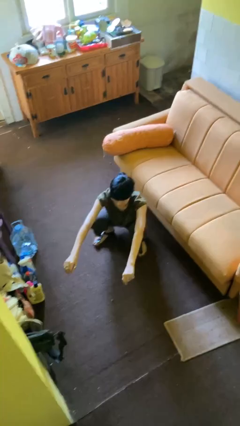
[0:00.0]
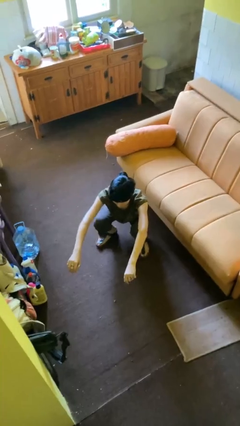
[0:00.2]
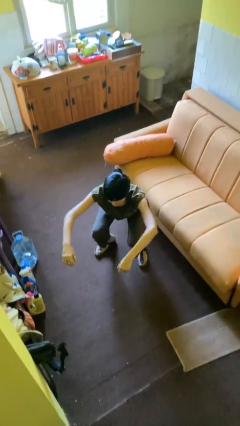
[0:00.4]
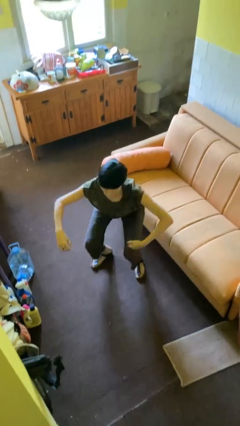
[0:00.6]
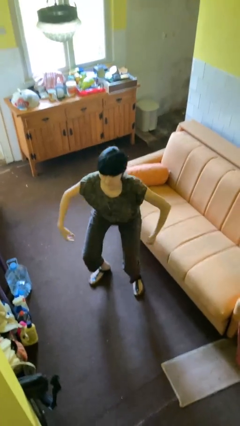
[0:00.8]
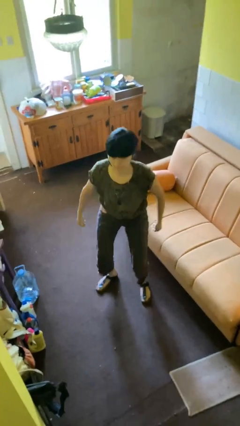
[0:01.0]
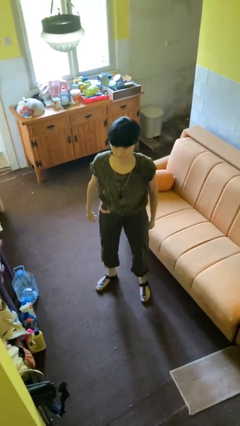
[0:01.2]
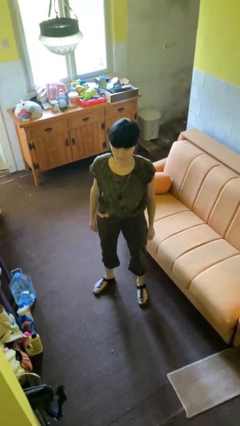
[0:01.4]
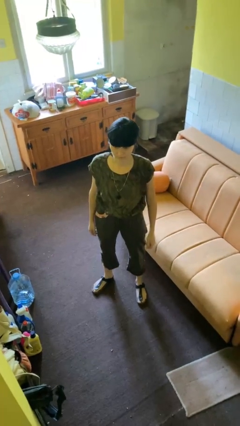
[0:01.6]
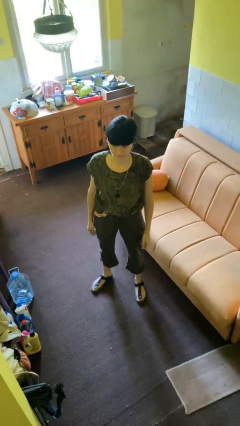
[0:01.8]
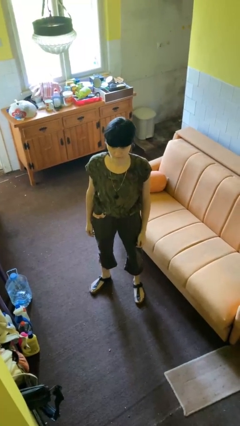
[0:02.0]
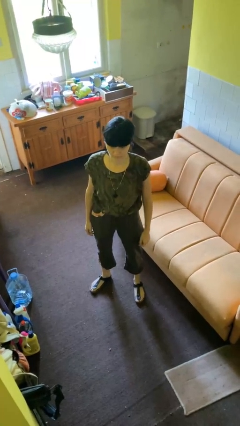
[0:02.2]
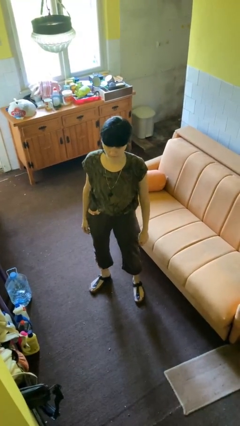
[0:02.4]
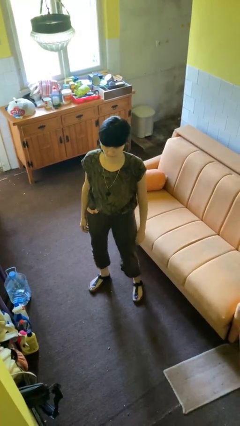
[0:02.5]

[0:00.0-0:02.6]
person stands up

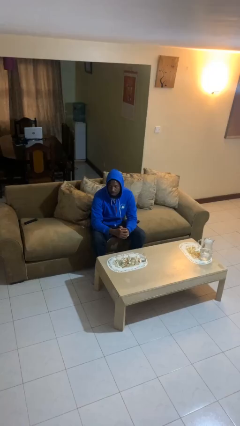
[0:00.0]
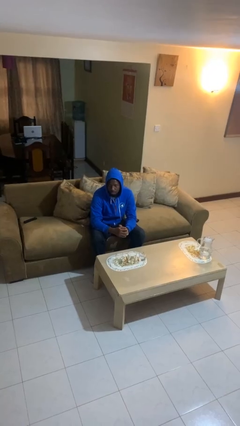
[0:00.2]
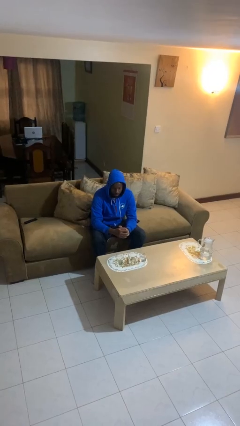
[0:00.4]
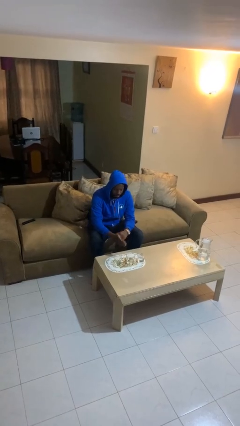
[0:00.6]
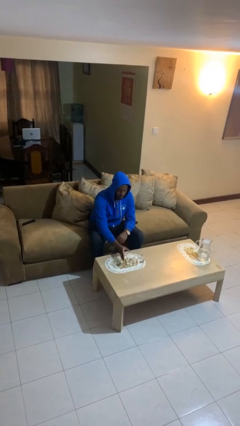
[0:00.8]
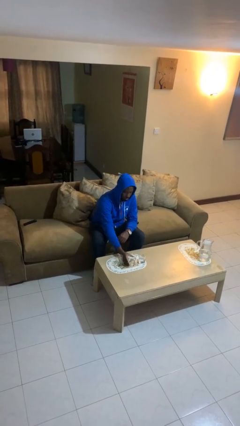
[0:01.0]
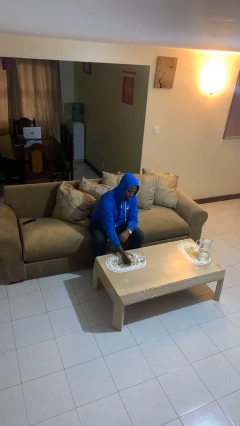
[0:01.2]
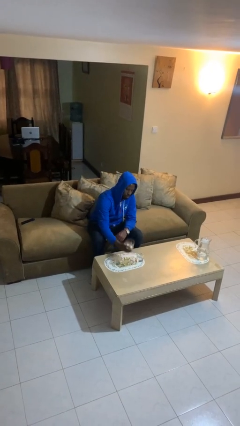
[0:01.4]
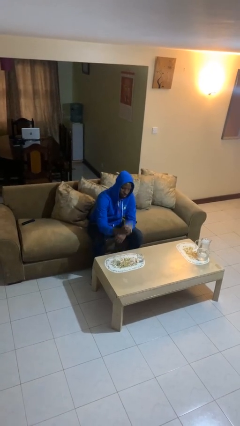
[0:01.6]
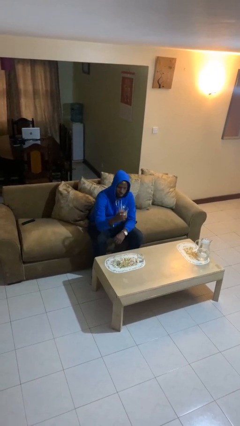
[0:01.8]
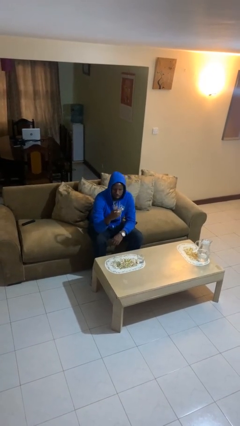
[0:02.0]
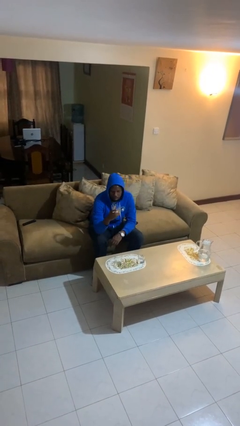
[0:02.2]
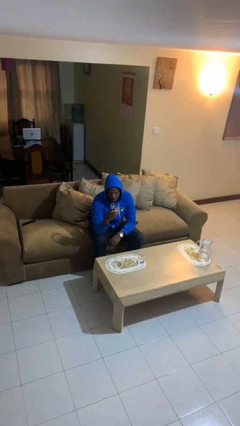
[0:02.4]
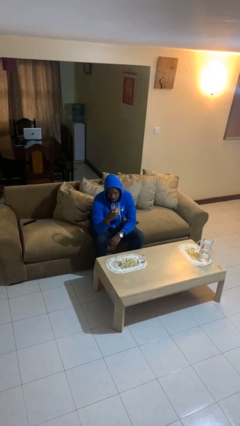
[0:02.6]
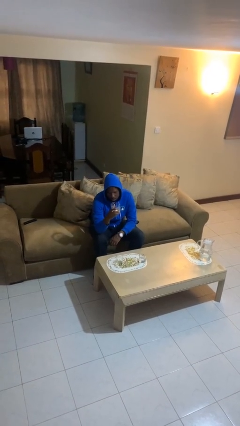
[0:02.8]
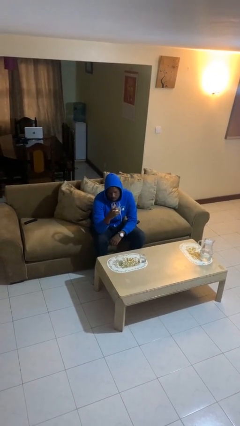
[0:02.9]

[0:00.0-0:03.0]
person picks up object from table

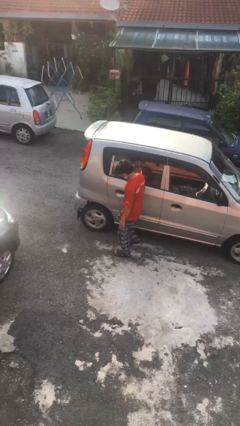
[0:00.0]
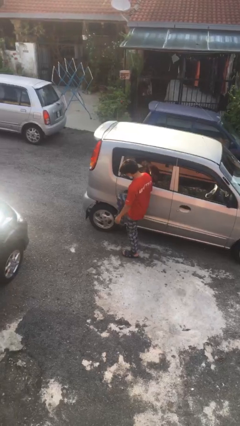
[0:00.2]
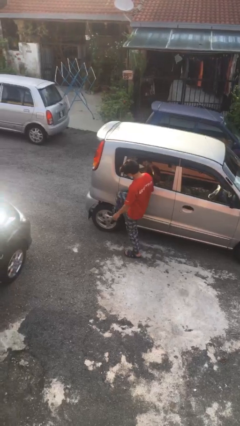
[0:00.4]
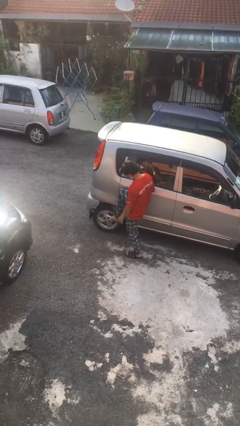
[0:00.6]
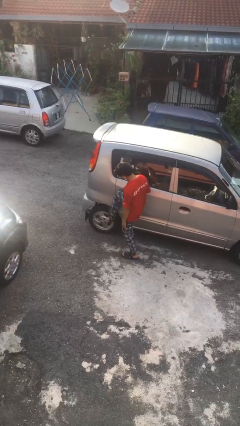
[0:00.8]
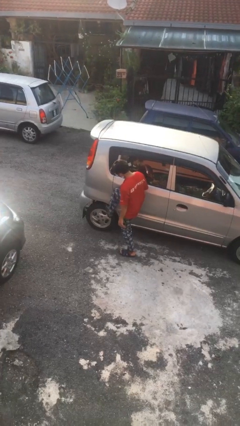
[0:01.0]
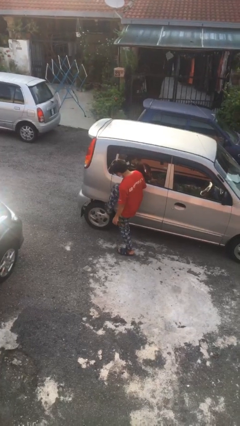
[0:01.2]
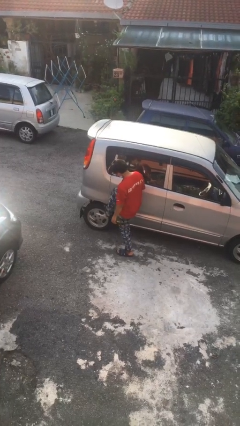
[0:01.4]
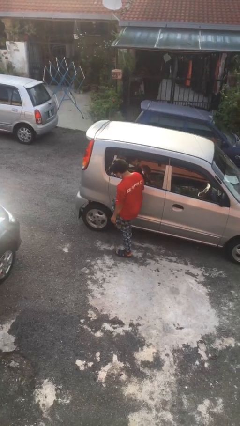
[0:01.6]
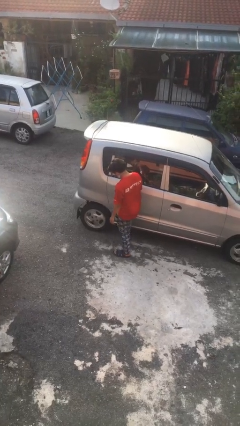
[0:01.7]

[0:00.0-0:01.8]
person kicks car tires

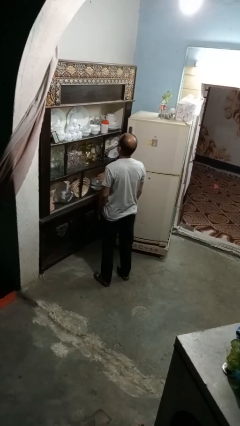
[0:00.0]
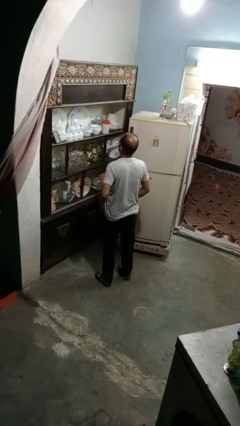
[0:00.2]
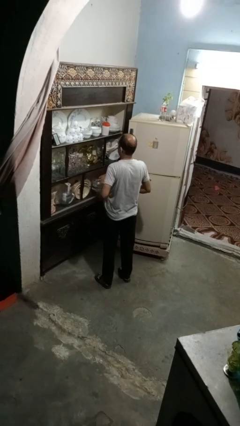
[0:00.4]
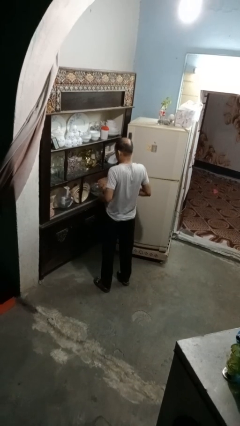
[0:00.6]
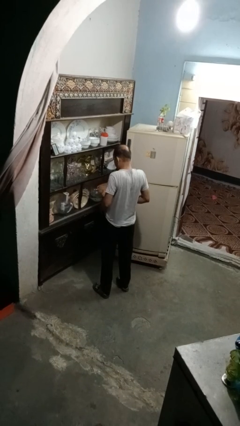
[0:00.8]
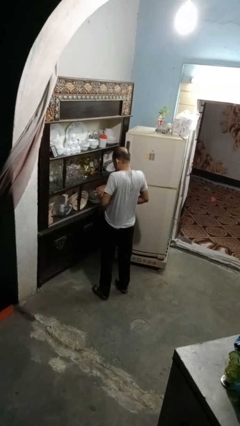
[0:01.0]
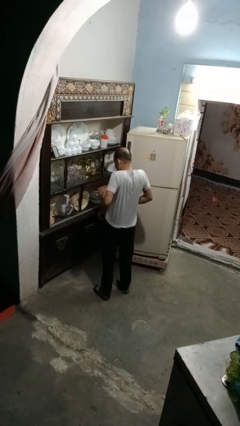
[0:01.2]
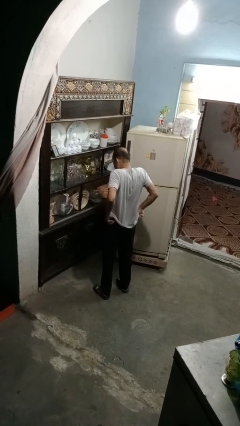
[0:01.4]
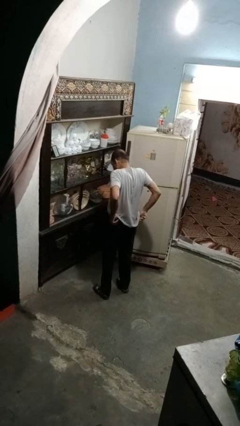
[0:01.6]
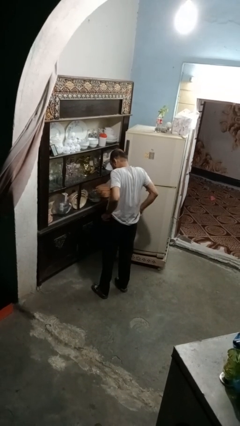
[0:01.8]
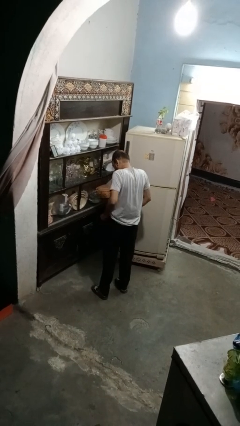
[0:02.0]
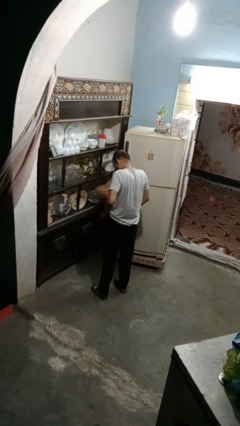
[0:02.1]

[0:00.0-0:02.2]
person hikes up pants

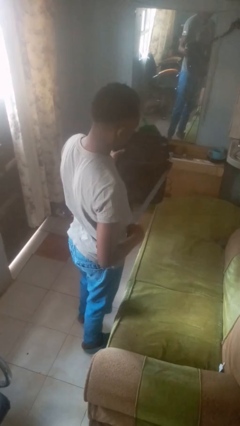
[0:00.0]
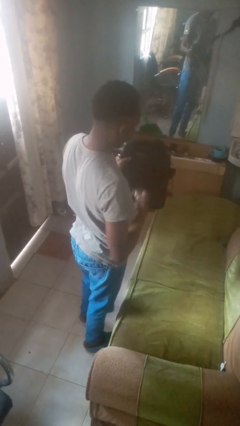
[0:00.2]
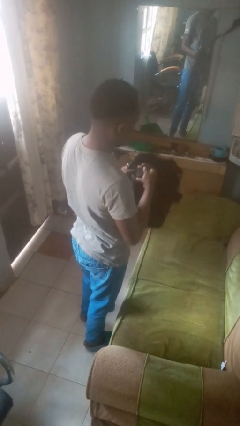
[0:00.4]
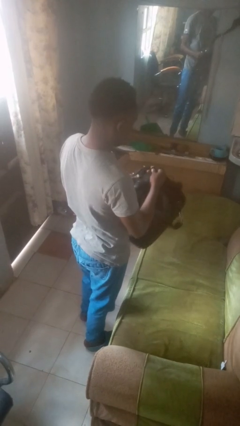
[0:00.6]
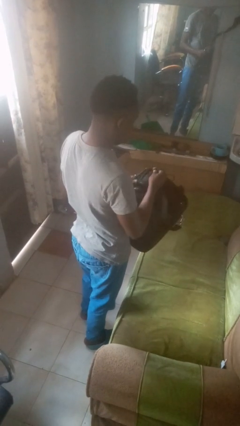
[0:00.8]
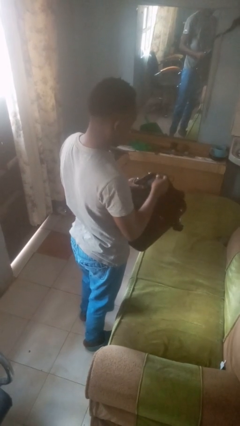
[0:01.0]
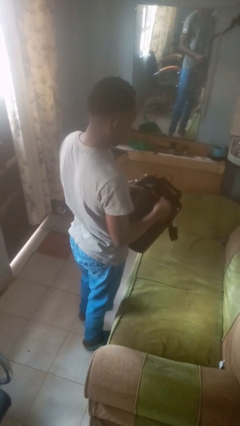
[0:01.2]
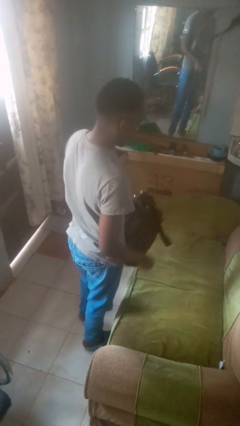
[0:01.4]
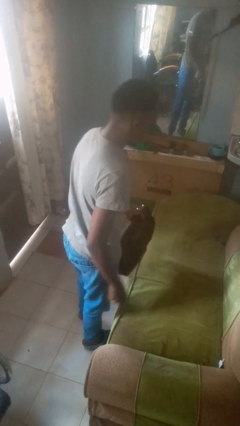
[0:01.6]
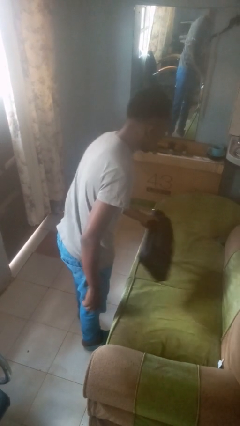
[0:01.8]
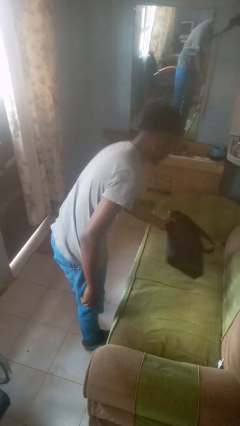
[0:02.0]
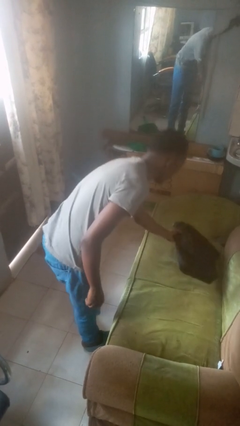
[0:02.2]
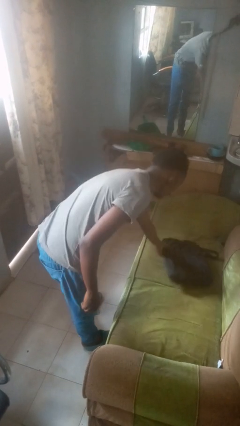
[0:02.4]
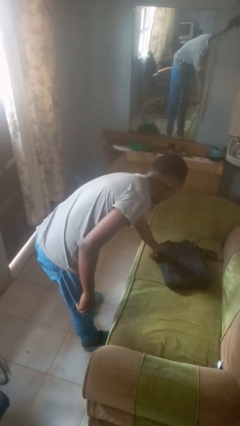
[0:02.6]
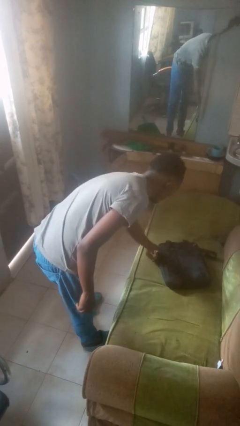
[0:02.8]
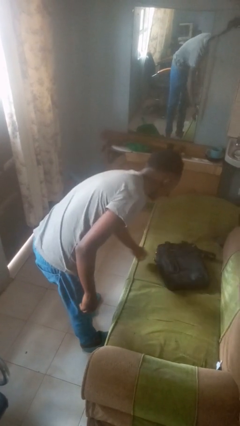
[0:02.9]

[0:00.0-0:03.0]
person puts down object on couch

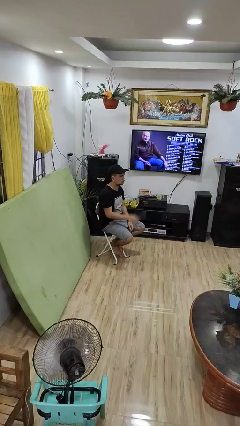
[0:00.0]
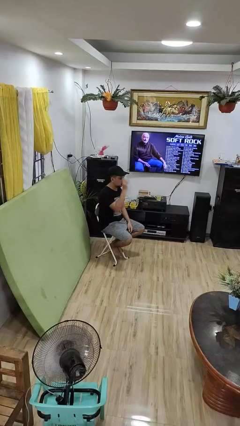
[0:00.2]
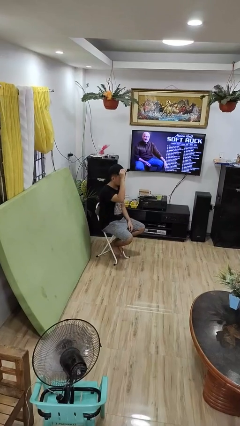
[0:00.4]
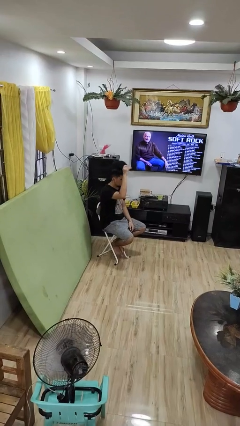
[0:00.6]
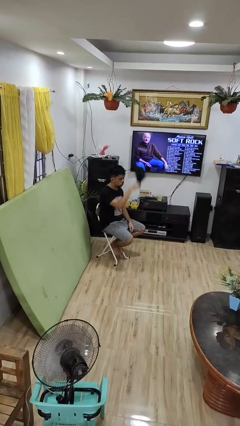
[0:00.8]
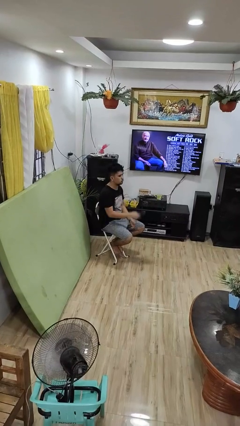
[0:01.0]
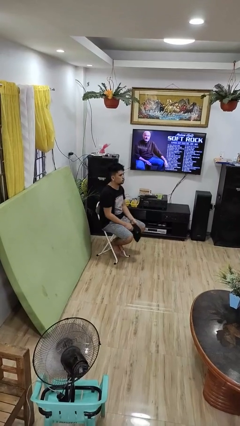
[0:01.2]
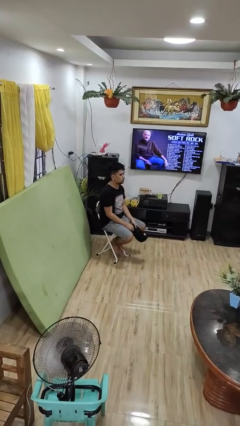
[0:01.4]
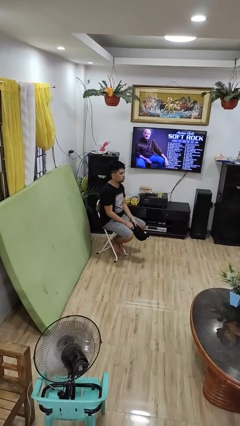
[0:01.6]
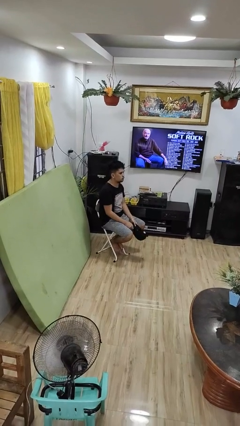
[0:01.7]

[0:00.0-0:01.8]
person takes off hat

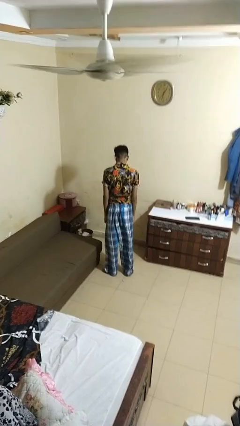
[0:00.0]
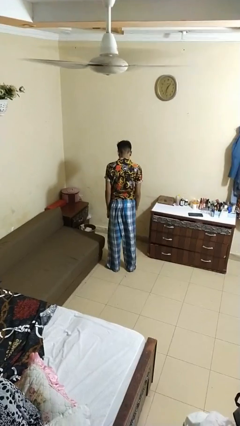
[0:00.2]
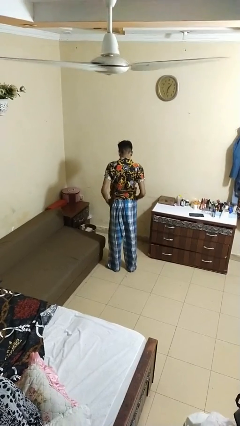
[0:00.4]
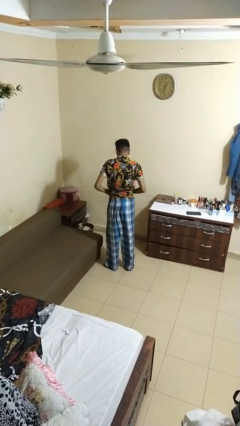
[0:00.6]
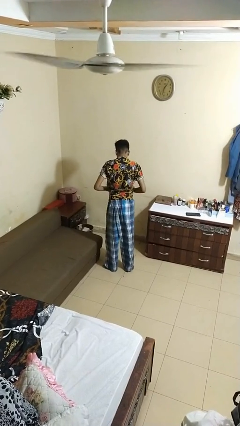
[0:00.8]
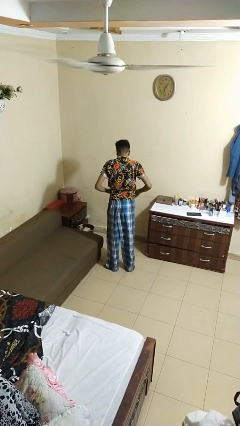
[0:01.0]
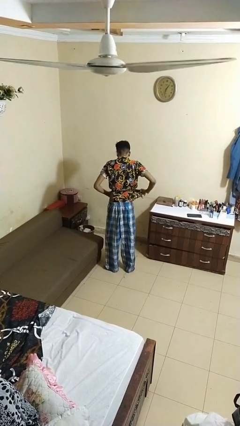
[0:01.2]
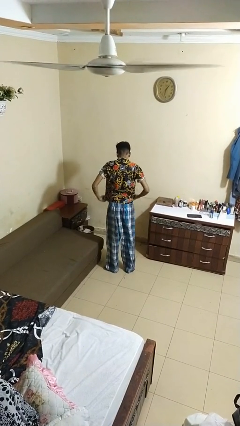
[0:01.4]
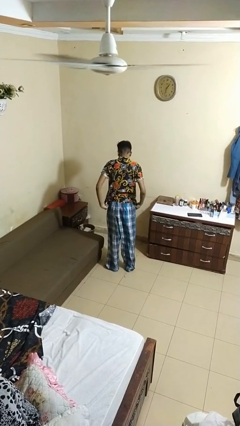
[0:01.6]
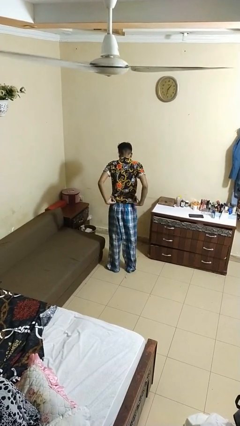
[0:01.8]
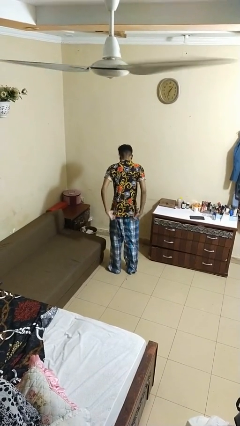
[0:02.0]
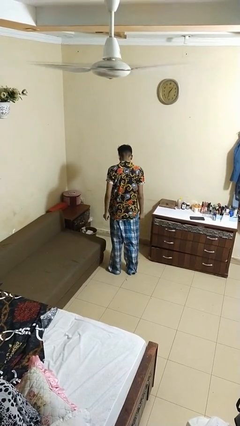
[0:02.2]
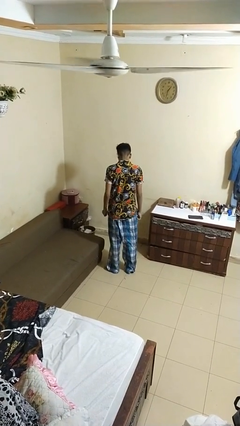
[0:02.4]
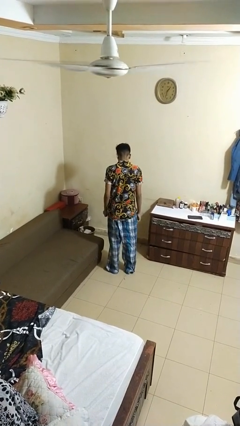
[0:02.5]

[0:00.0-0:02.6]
person untucks shirt
